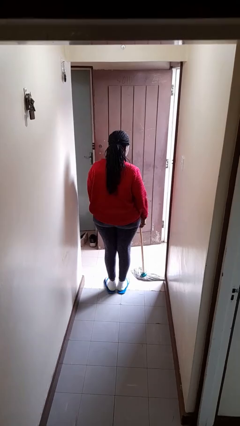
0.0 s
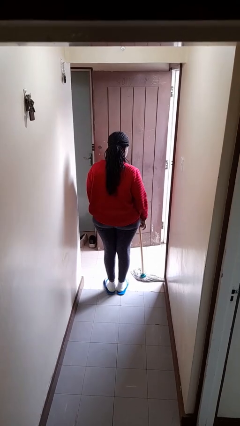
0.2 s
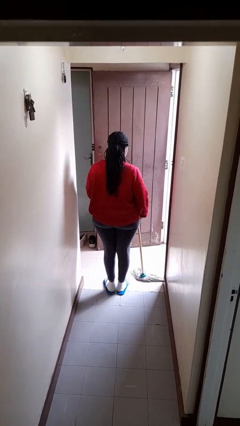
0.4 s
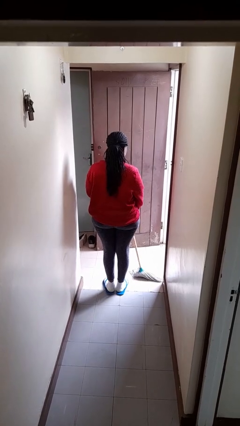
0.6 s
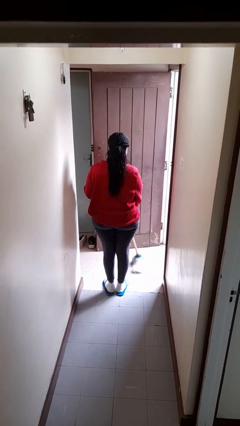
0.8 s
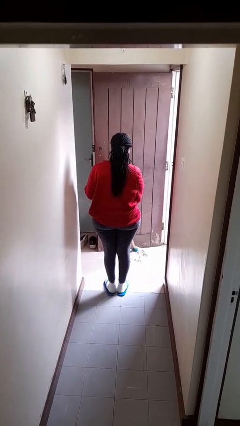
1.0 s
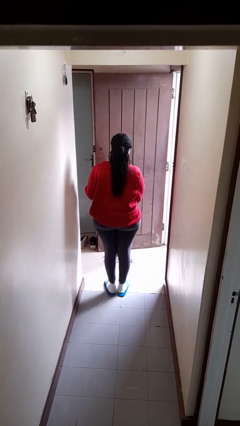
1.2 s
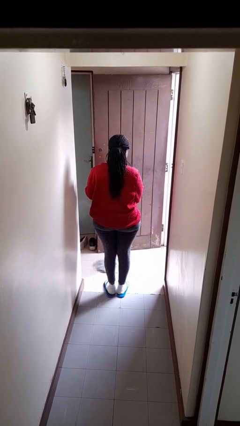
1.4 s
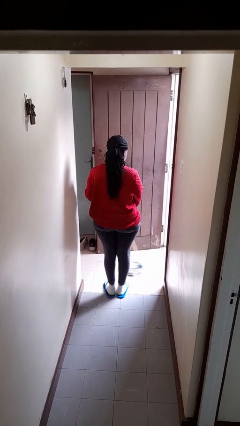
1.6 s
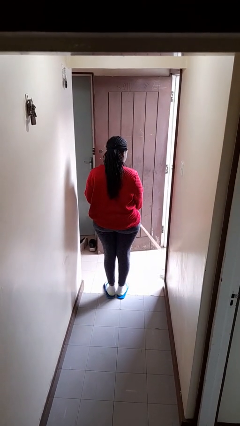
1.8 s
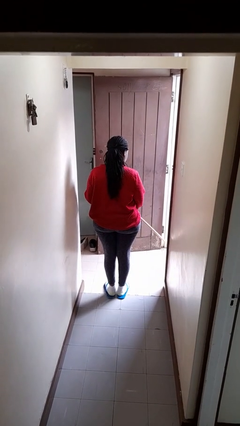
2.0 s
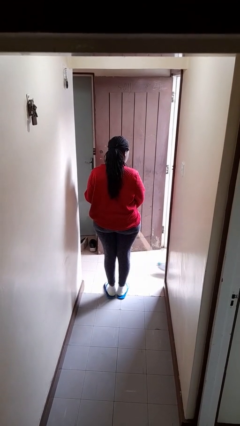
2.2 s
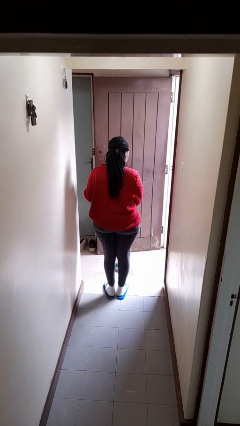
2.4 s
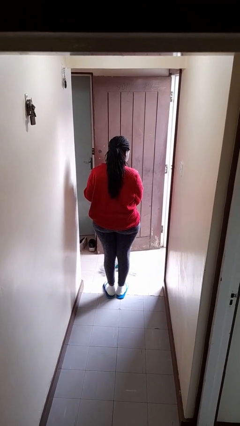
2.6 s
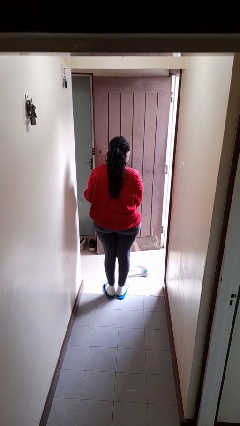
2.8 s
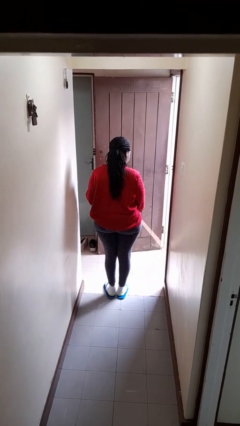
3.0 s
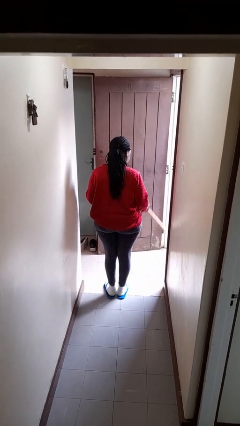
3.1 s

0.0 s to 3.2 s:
person mops

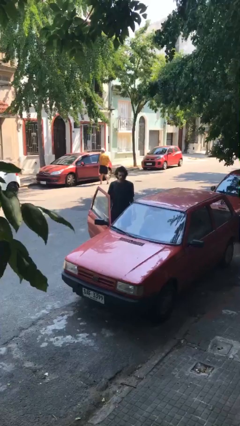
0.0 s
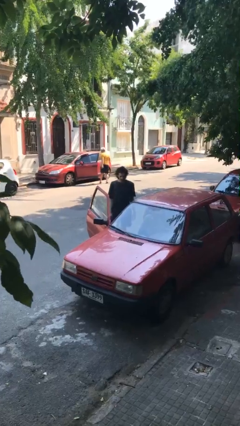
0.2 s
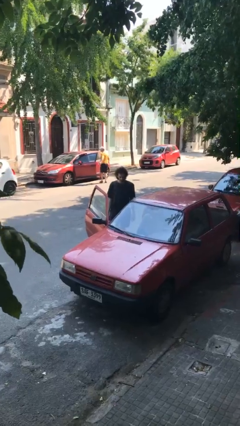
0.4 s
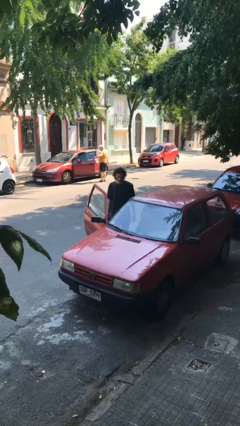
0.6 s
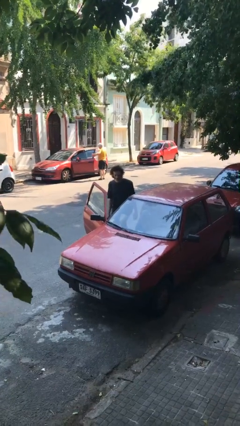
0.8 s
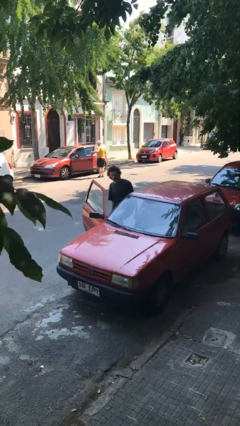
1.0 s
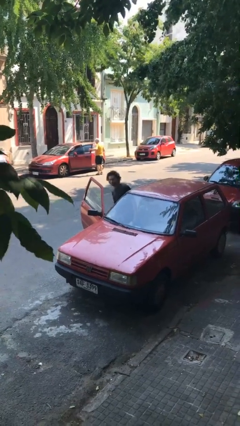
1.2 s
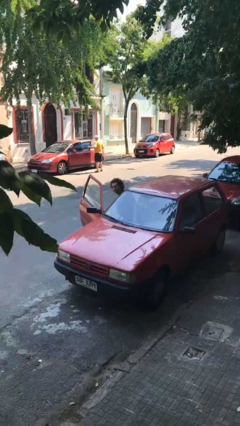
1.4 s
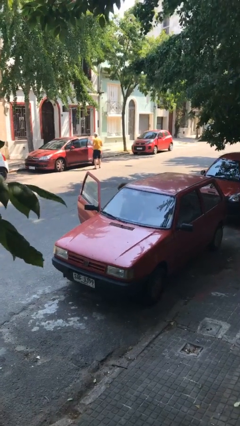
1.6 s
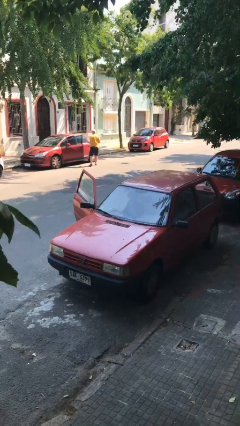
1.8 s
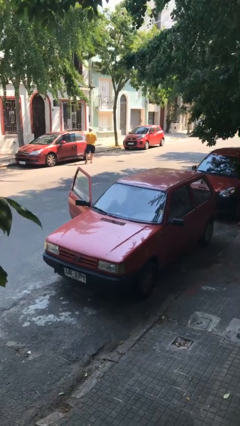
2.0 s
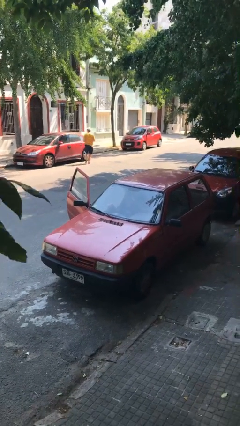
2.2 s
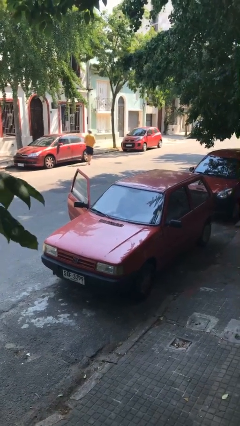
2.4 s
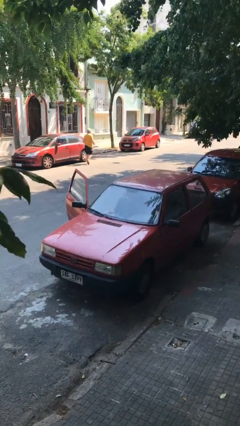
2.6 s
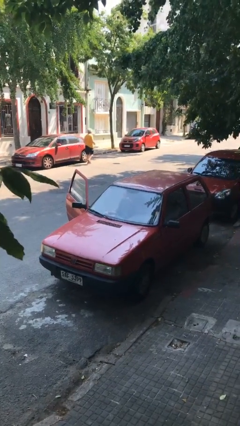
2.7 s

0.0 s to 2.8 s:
person enters car

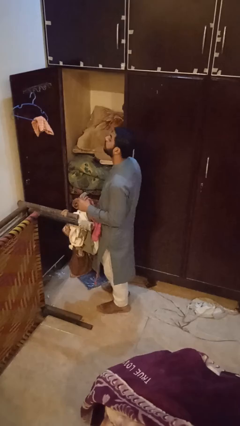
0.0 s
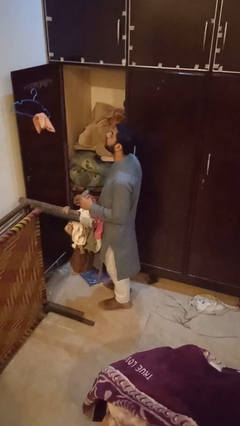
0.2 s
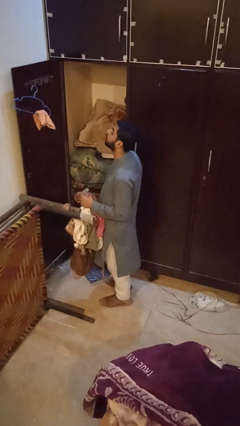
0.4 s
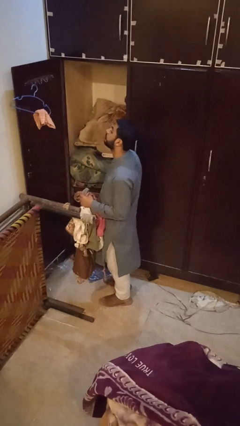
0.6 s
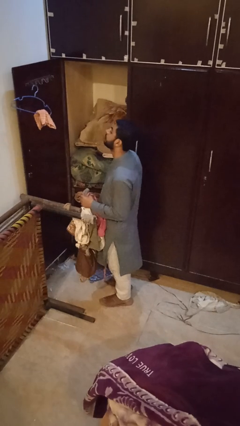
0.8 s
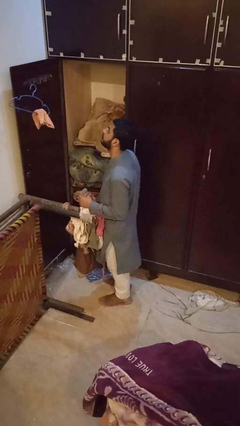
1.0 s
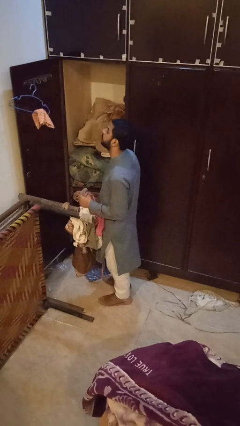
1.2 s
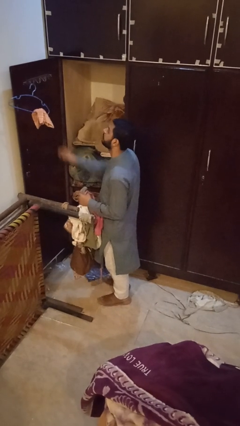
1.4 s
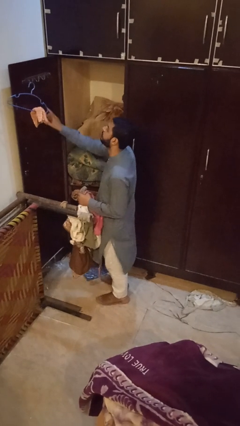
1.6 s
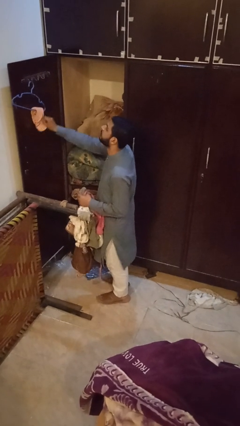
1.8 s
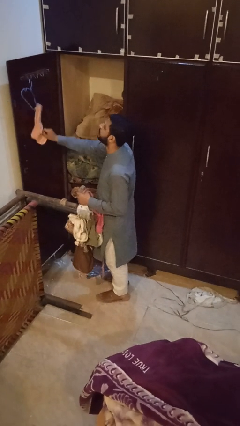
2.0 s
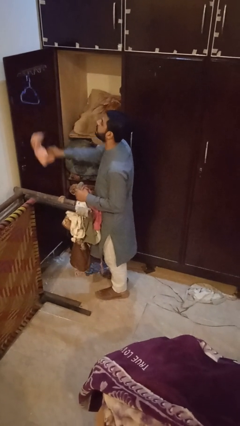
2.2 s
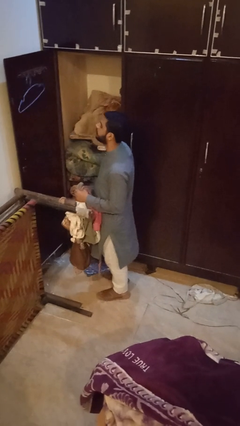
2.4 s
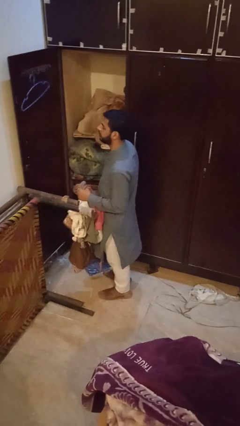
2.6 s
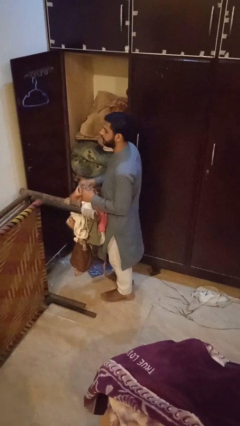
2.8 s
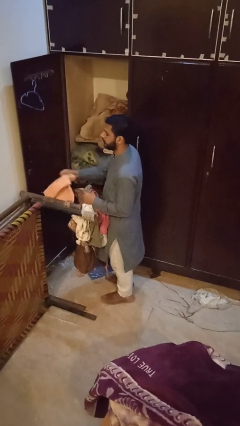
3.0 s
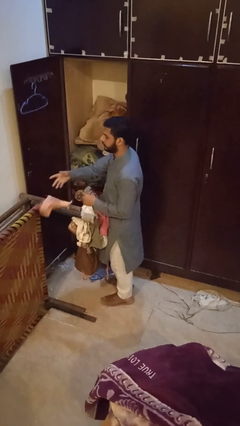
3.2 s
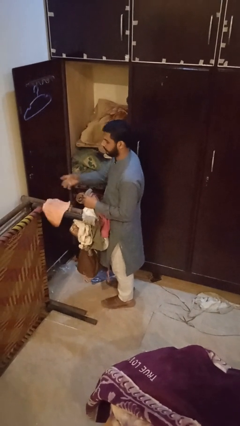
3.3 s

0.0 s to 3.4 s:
person takes clothes from closet

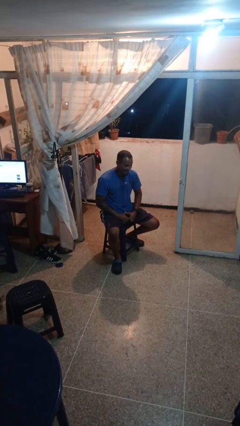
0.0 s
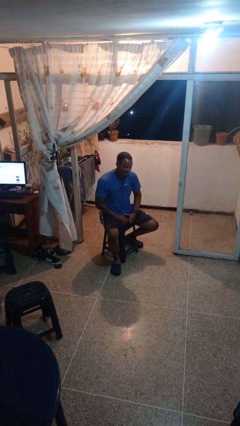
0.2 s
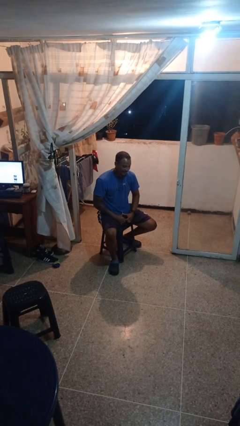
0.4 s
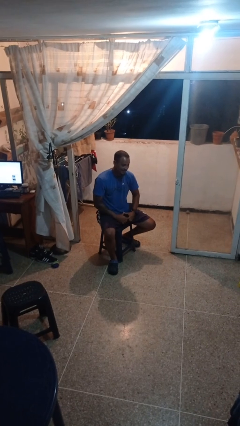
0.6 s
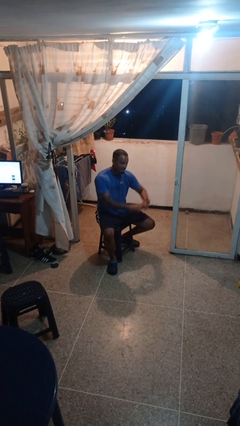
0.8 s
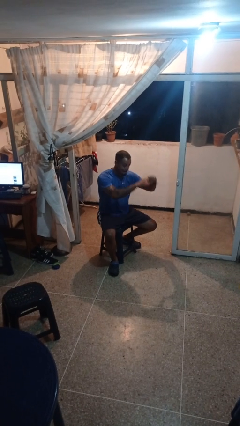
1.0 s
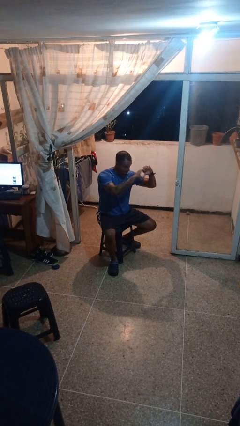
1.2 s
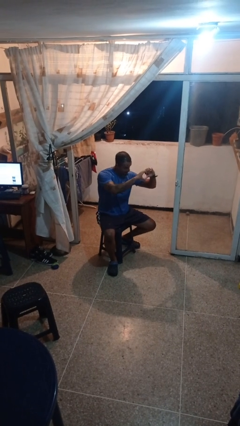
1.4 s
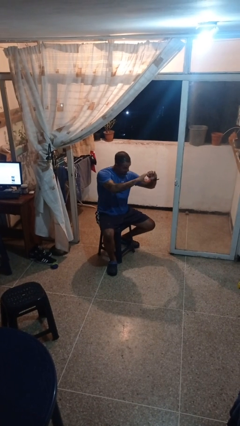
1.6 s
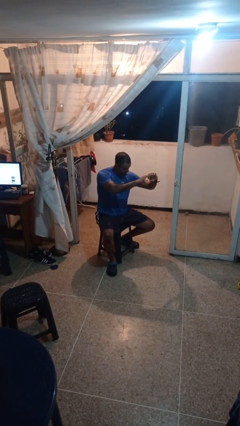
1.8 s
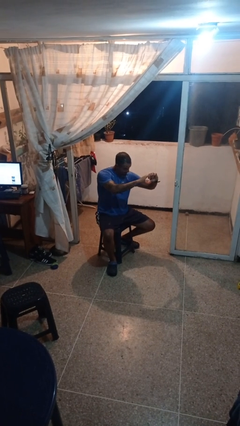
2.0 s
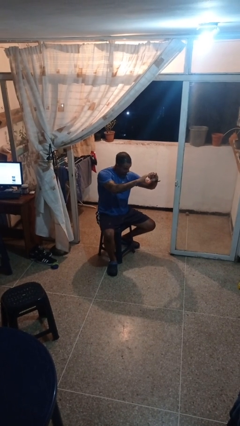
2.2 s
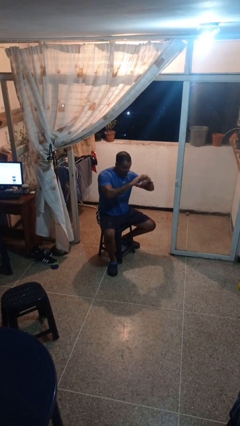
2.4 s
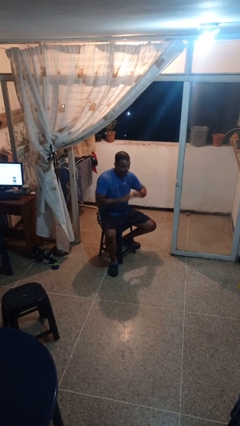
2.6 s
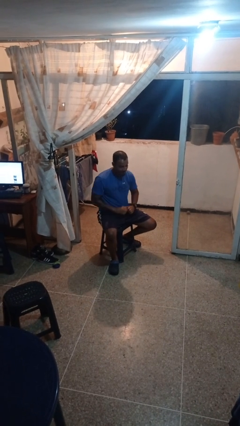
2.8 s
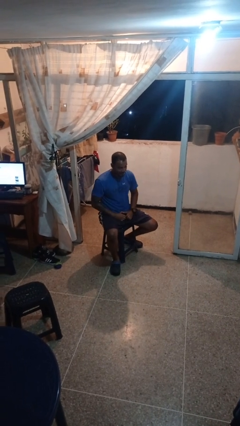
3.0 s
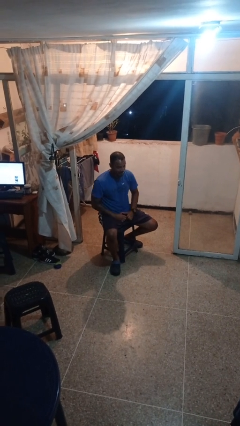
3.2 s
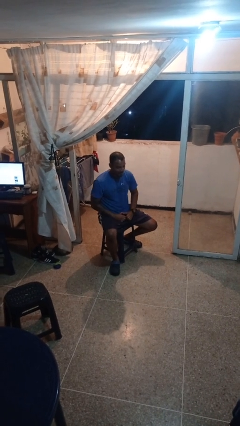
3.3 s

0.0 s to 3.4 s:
person gestures heart

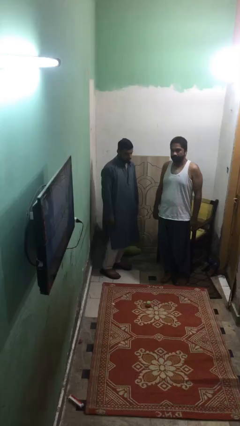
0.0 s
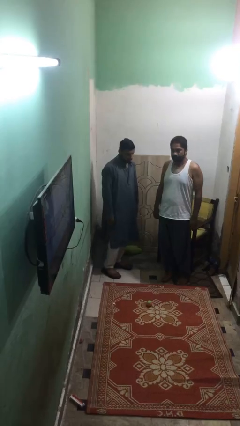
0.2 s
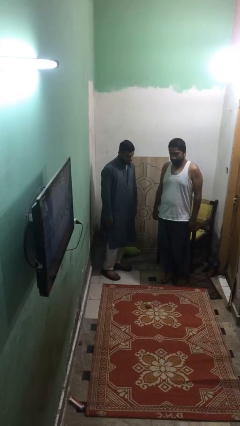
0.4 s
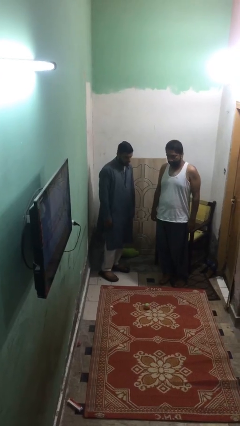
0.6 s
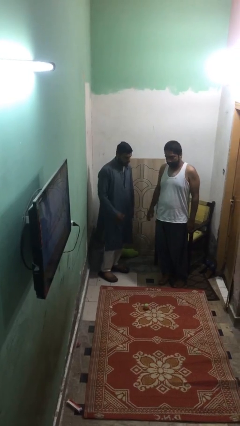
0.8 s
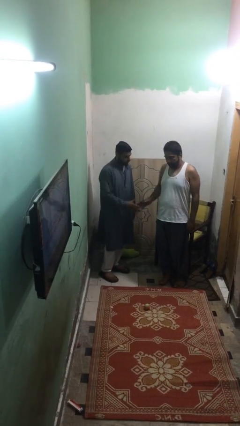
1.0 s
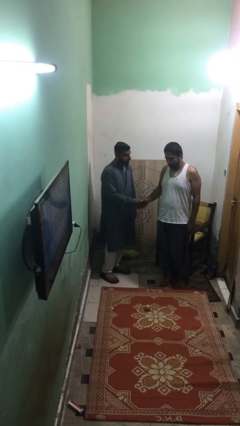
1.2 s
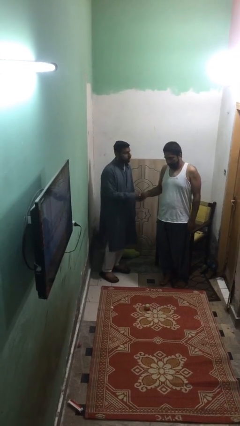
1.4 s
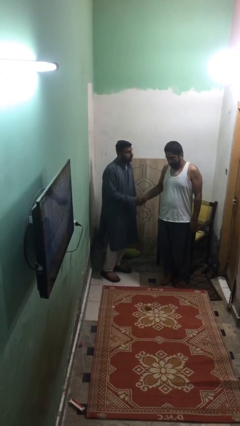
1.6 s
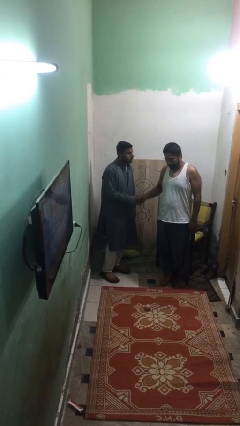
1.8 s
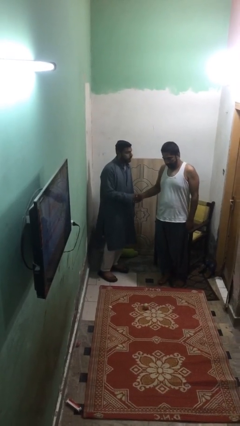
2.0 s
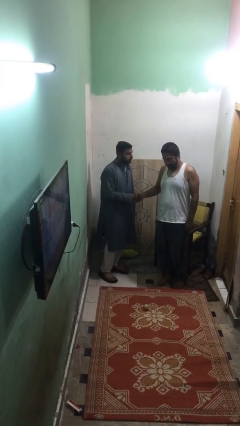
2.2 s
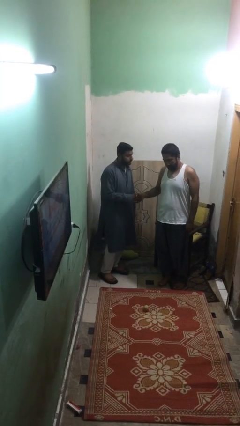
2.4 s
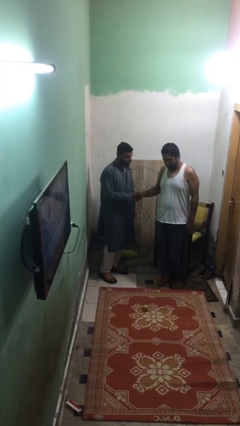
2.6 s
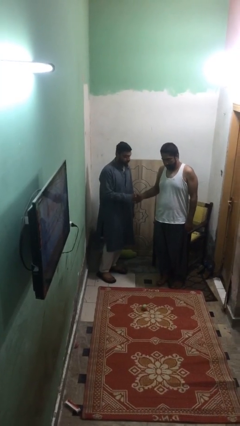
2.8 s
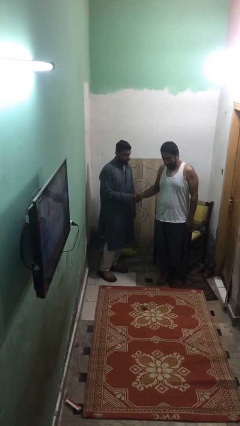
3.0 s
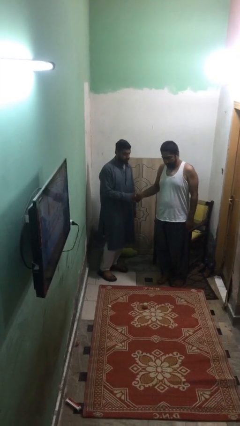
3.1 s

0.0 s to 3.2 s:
person shakes hand

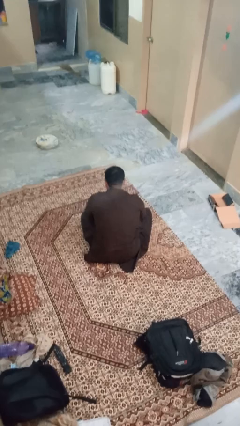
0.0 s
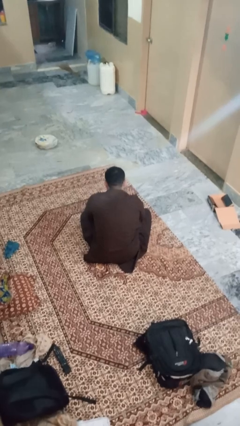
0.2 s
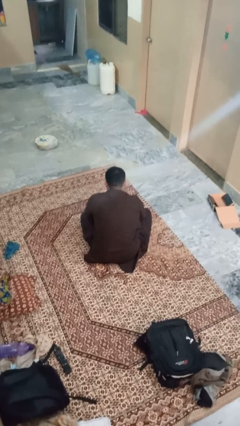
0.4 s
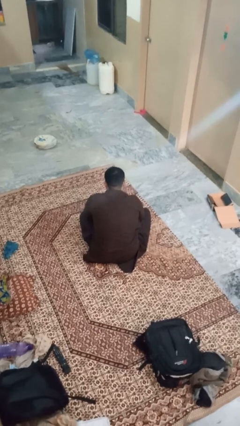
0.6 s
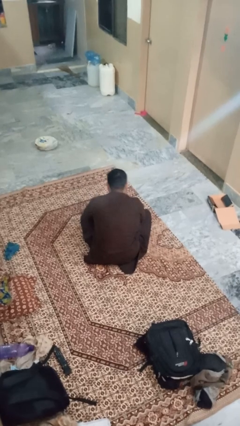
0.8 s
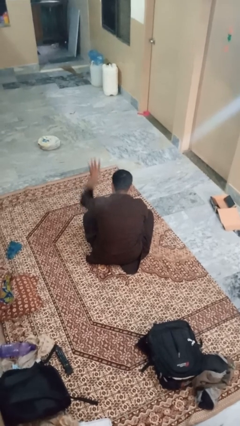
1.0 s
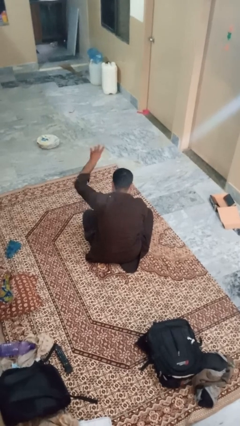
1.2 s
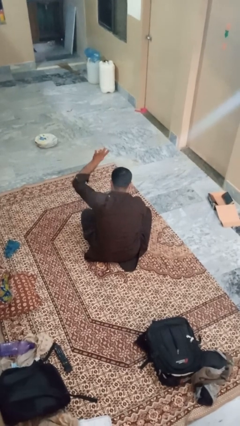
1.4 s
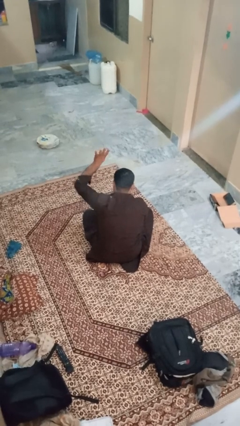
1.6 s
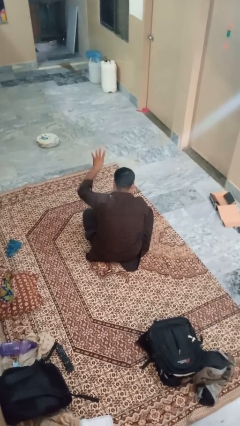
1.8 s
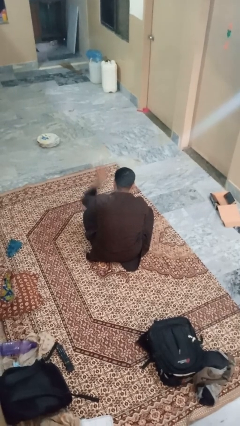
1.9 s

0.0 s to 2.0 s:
person gestures number four
